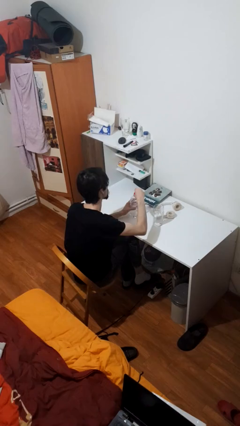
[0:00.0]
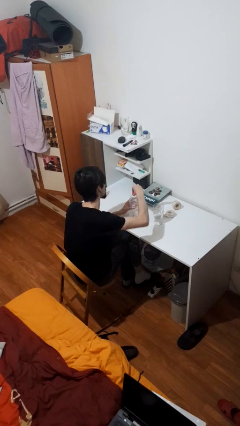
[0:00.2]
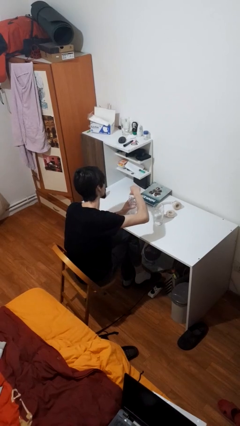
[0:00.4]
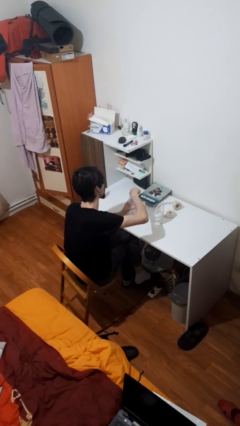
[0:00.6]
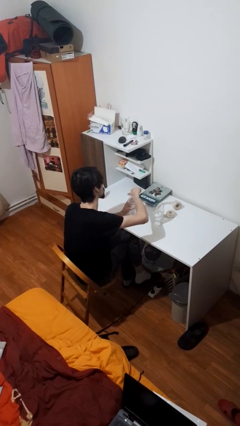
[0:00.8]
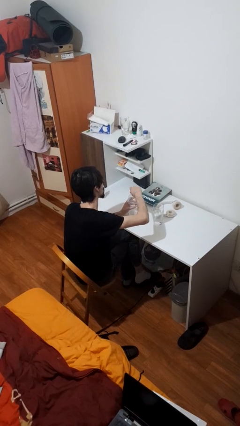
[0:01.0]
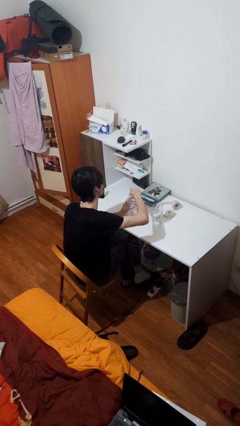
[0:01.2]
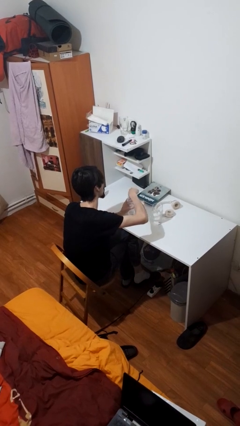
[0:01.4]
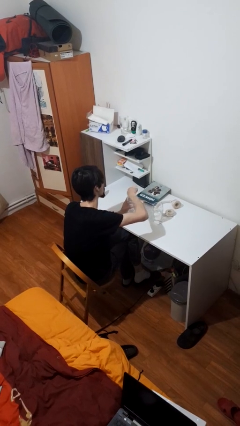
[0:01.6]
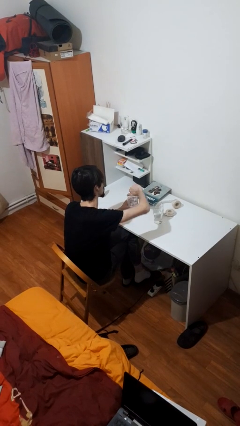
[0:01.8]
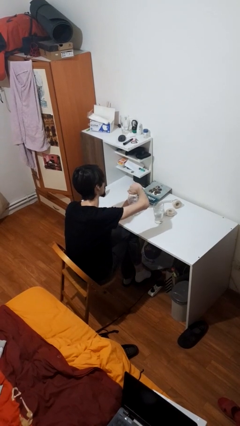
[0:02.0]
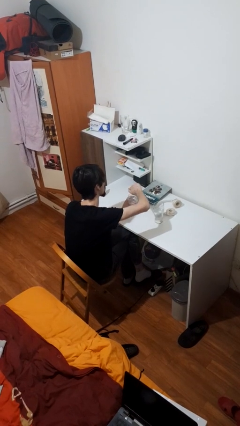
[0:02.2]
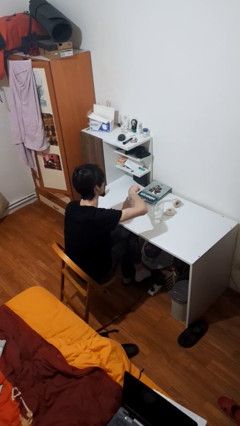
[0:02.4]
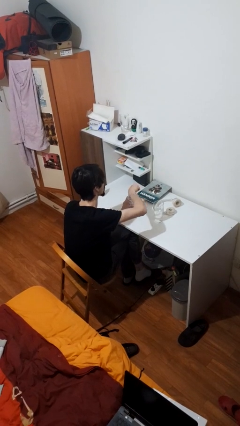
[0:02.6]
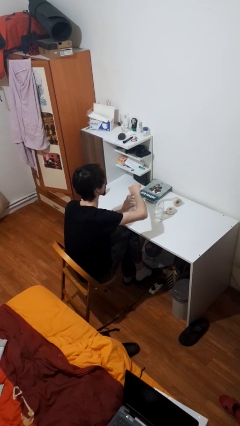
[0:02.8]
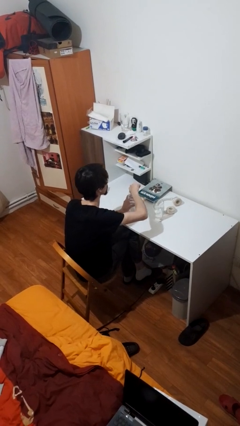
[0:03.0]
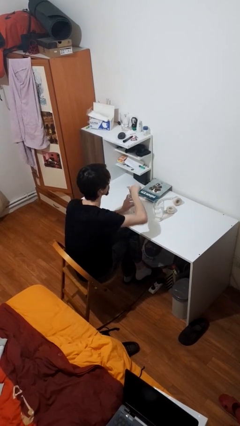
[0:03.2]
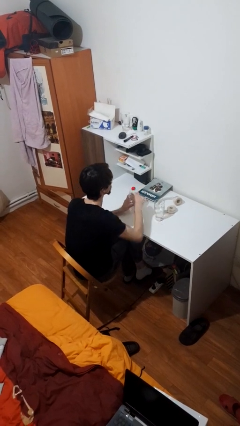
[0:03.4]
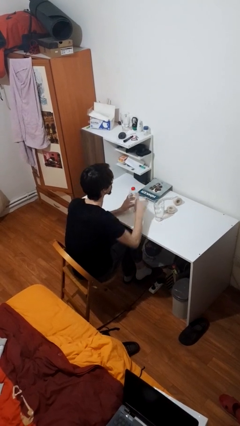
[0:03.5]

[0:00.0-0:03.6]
person screws lid to bottle

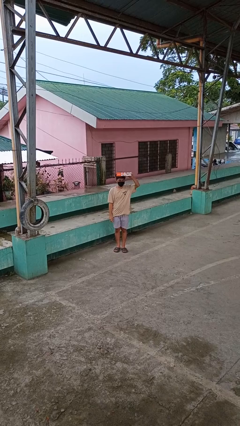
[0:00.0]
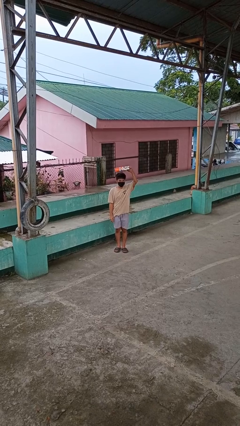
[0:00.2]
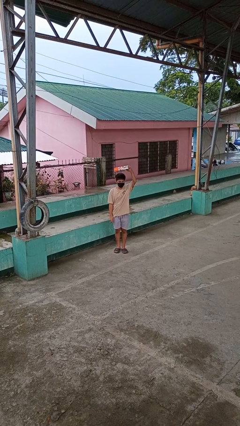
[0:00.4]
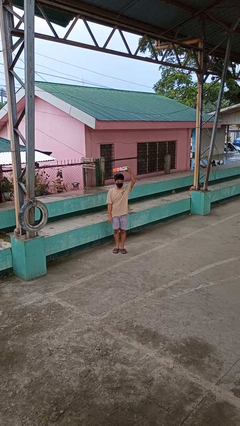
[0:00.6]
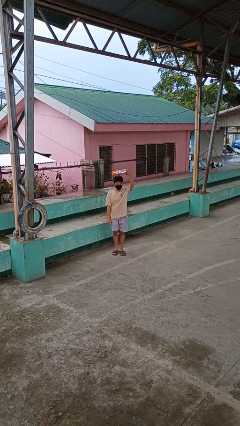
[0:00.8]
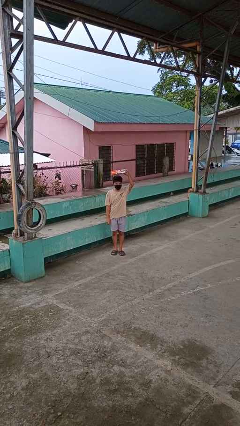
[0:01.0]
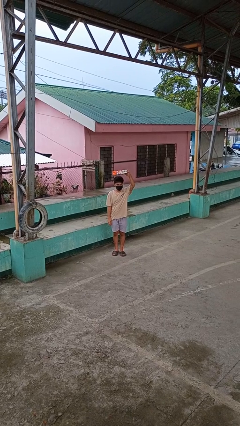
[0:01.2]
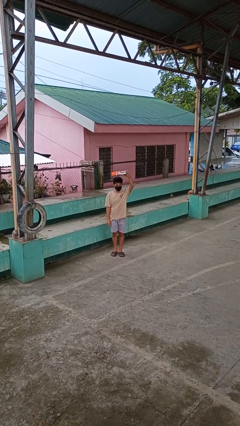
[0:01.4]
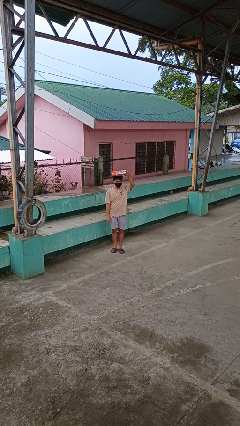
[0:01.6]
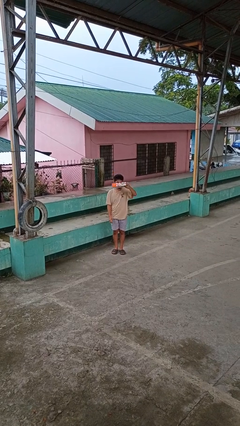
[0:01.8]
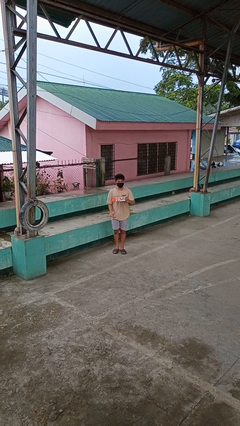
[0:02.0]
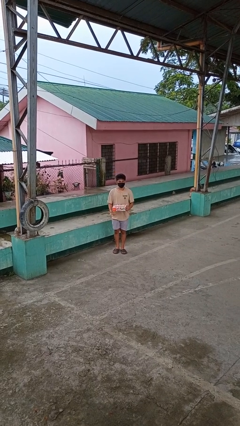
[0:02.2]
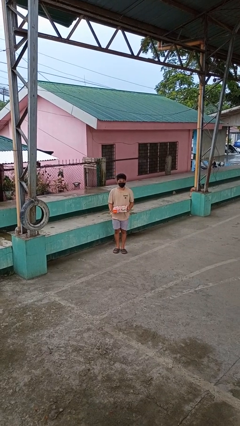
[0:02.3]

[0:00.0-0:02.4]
person holds object above head

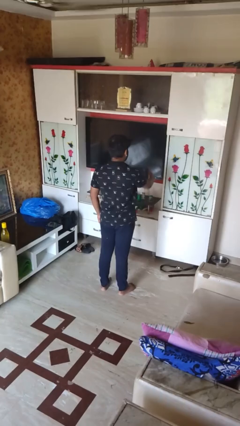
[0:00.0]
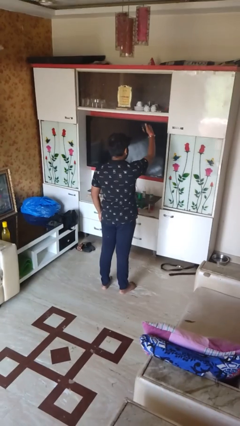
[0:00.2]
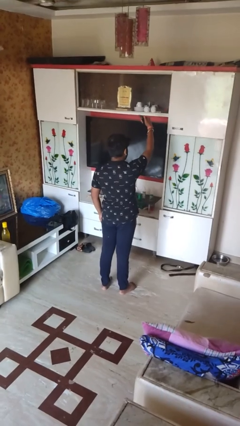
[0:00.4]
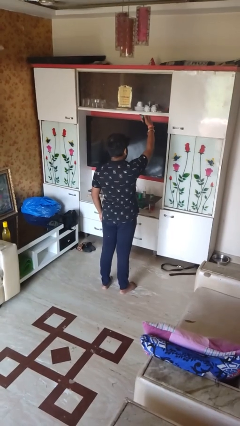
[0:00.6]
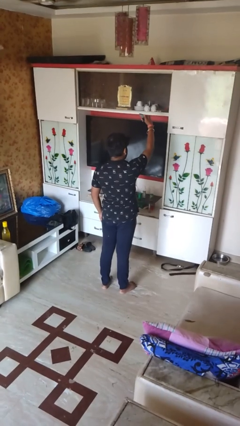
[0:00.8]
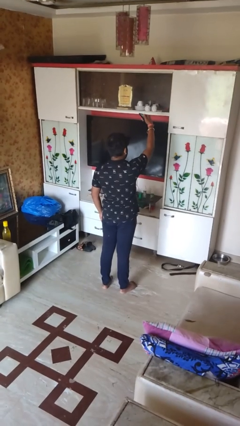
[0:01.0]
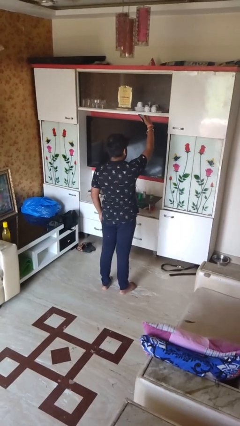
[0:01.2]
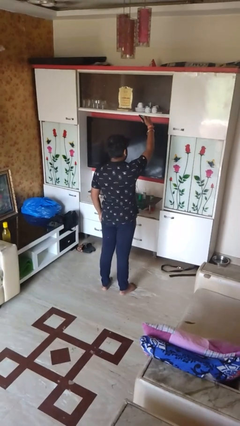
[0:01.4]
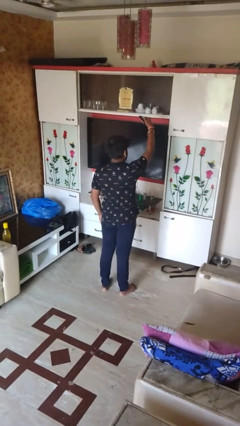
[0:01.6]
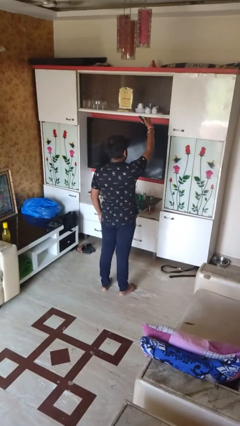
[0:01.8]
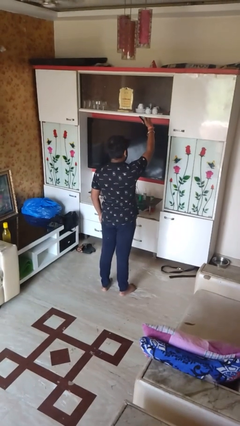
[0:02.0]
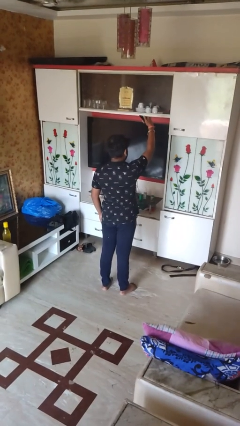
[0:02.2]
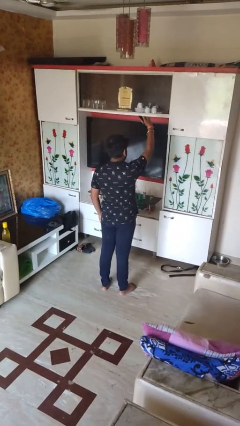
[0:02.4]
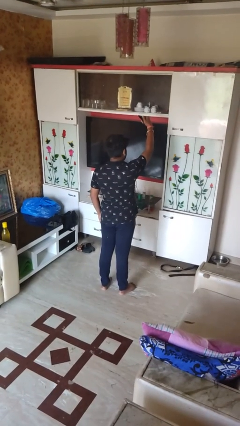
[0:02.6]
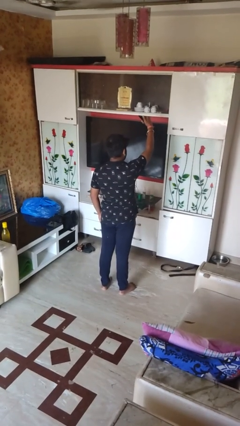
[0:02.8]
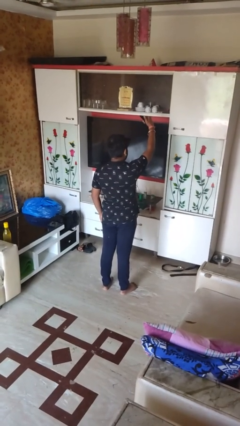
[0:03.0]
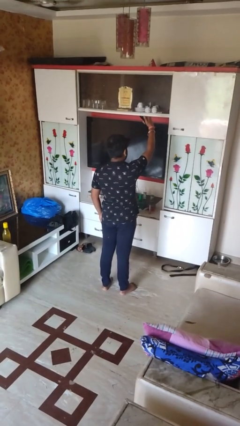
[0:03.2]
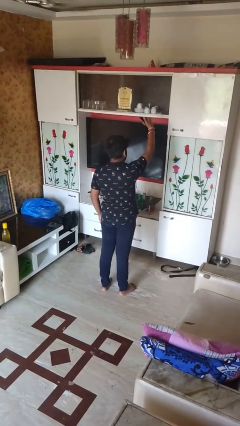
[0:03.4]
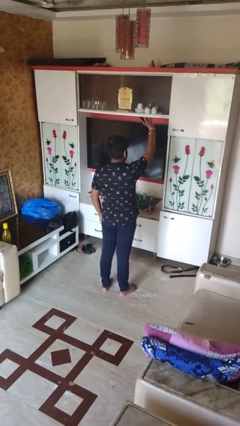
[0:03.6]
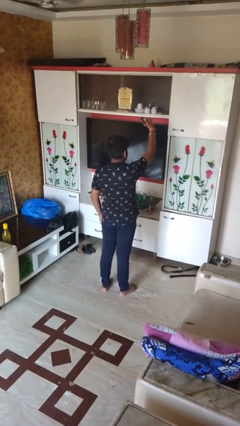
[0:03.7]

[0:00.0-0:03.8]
person takes selfie

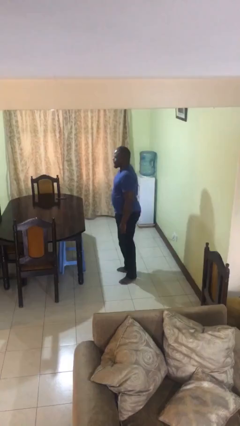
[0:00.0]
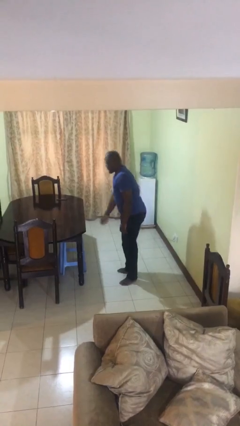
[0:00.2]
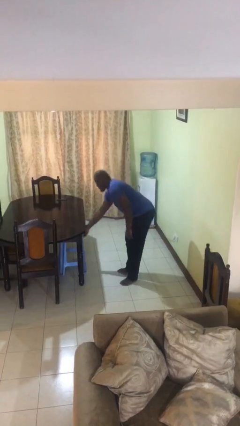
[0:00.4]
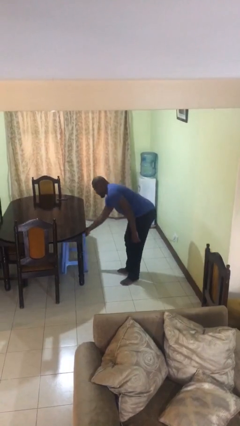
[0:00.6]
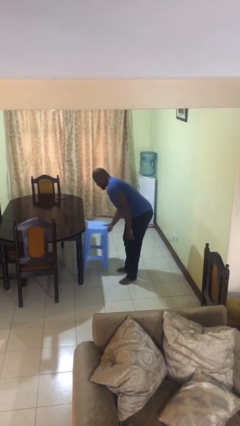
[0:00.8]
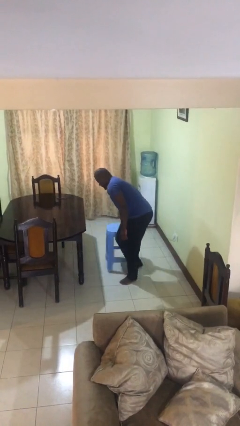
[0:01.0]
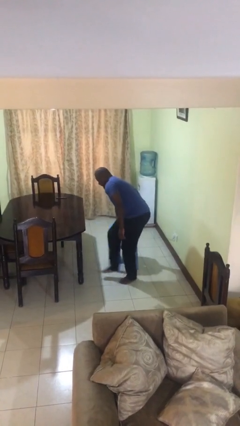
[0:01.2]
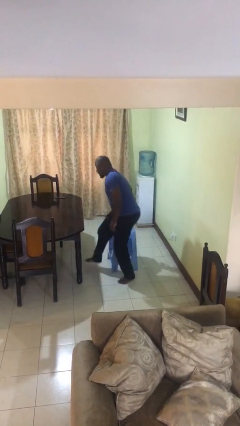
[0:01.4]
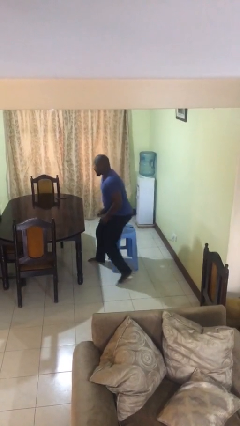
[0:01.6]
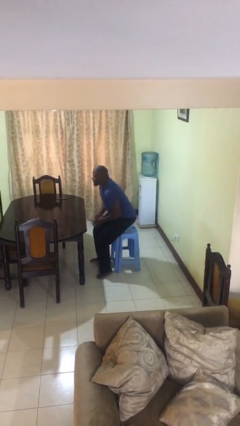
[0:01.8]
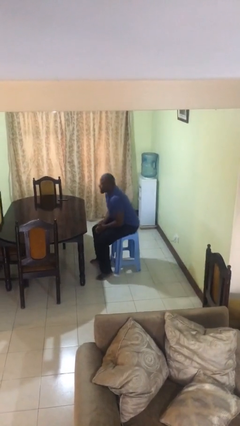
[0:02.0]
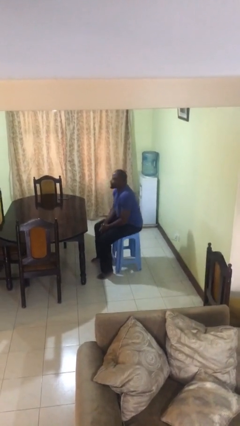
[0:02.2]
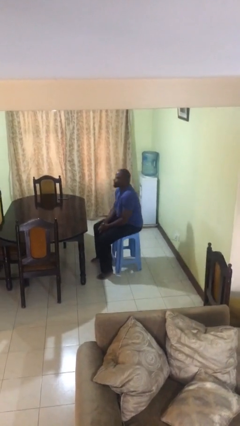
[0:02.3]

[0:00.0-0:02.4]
person sits down

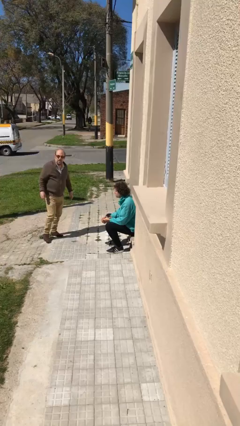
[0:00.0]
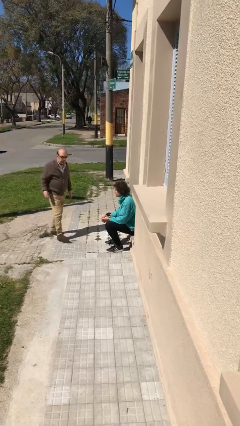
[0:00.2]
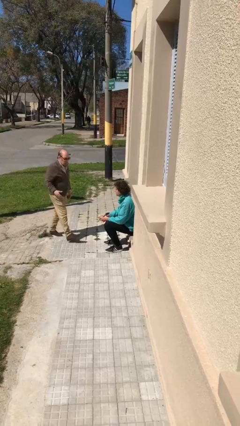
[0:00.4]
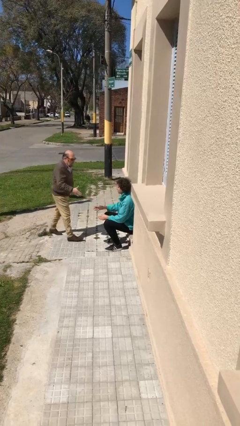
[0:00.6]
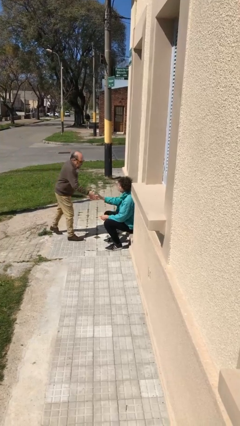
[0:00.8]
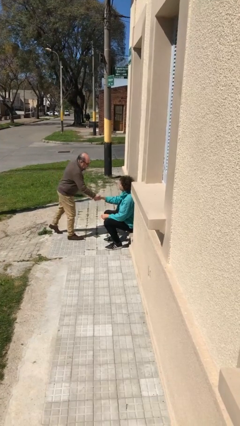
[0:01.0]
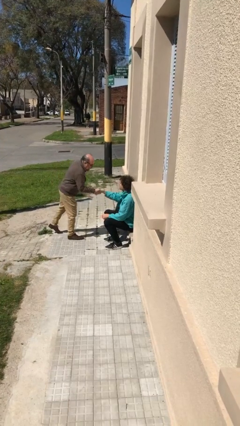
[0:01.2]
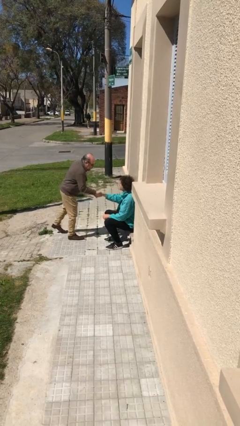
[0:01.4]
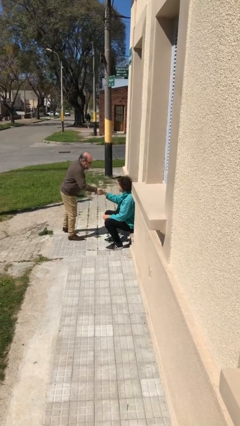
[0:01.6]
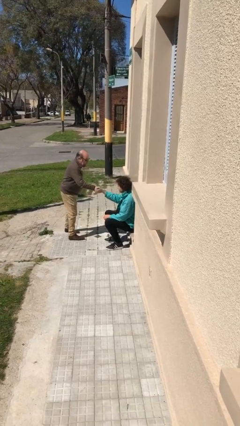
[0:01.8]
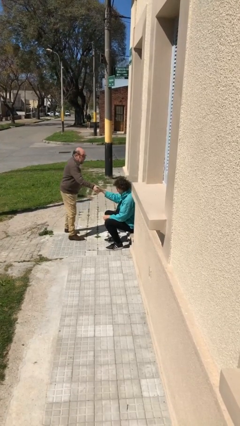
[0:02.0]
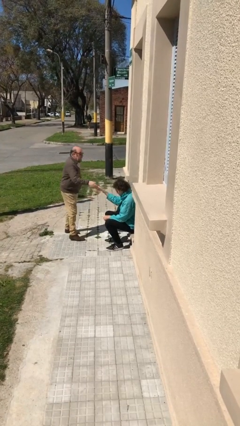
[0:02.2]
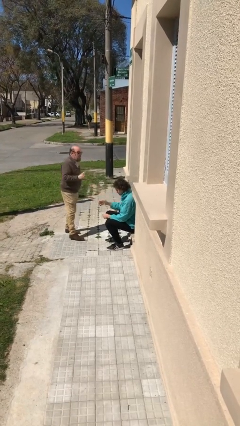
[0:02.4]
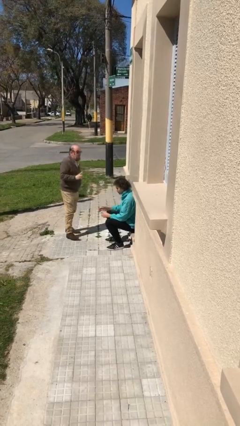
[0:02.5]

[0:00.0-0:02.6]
person shakes hand

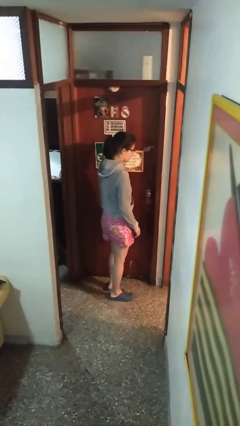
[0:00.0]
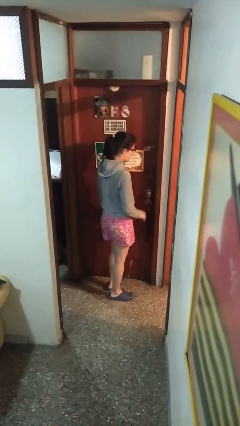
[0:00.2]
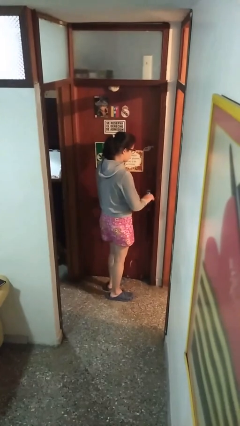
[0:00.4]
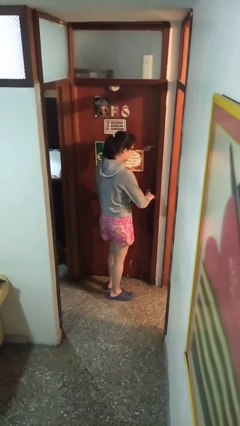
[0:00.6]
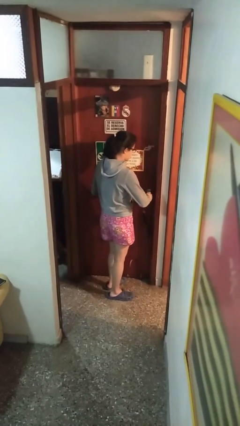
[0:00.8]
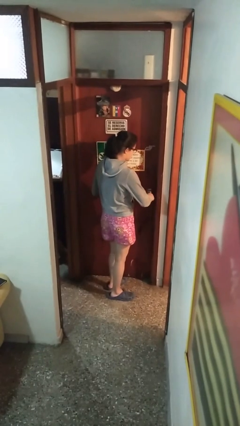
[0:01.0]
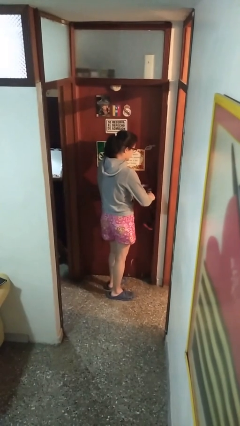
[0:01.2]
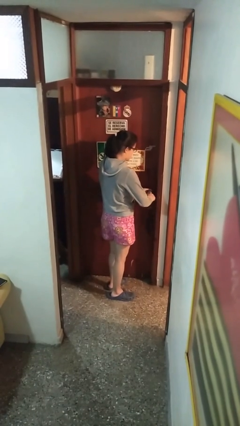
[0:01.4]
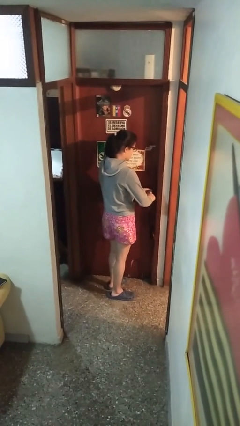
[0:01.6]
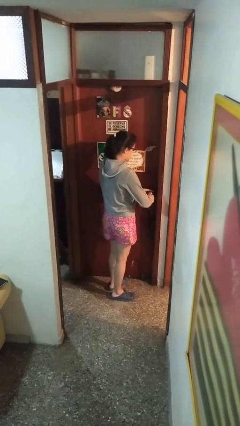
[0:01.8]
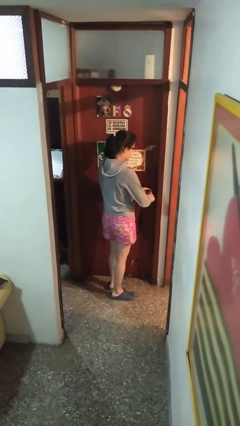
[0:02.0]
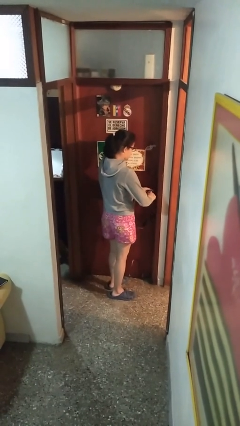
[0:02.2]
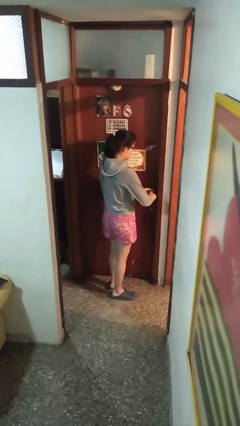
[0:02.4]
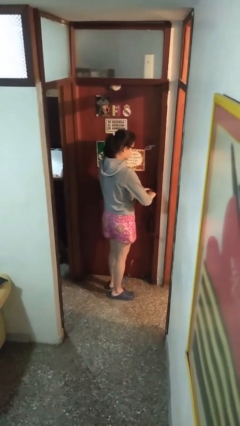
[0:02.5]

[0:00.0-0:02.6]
person locks door with keys
